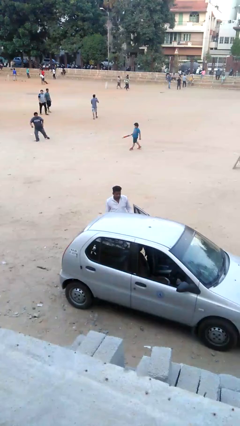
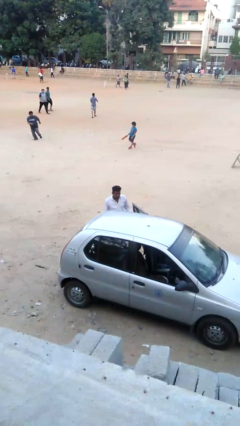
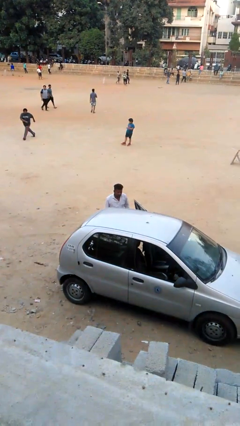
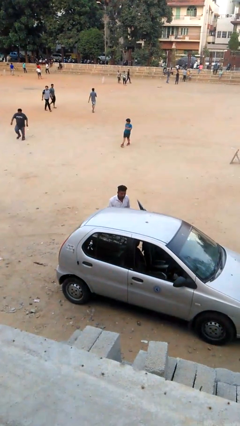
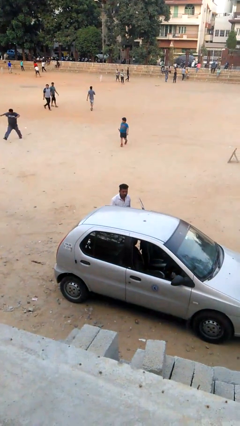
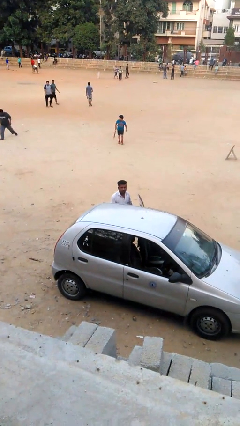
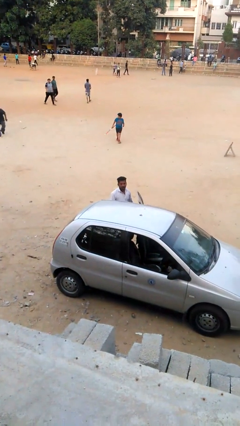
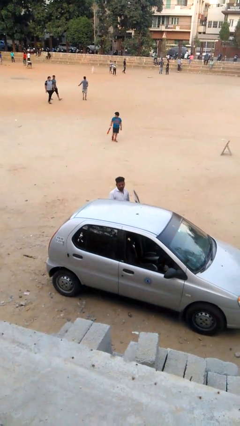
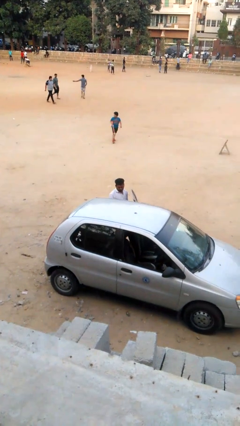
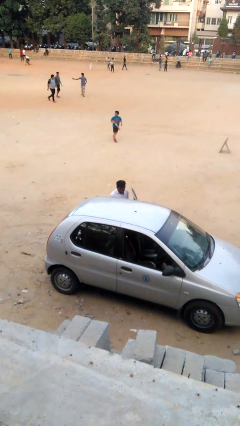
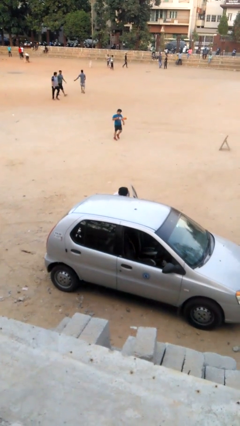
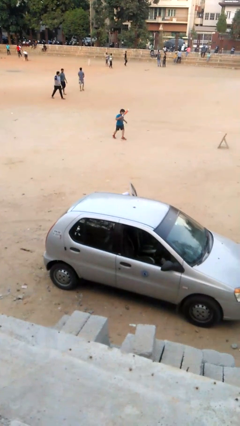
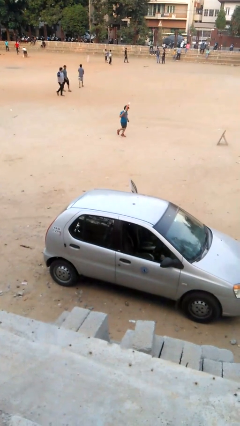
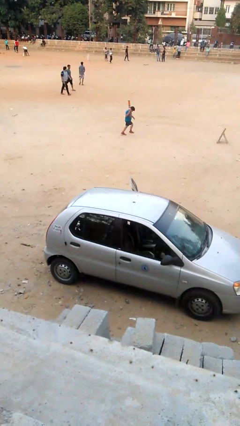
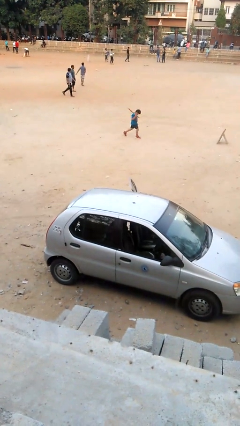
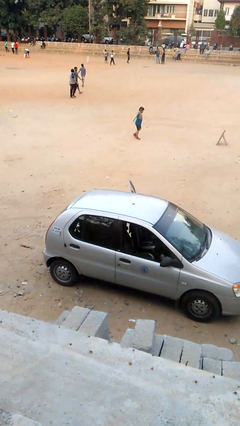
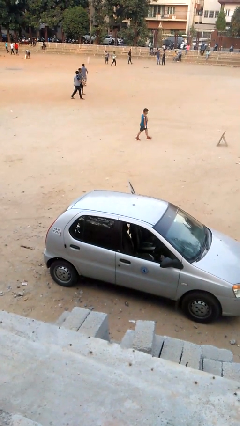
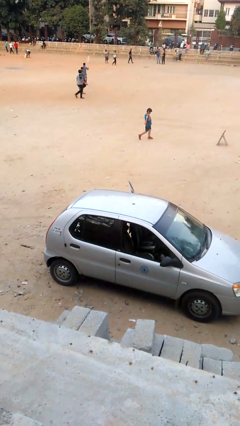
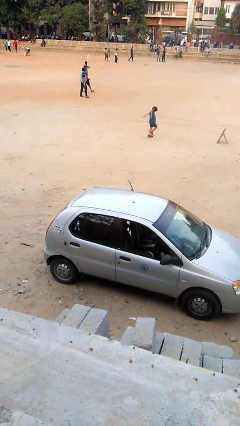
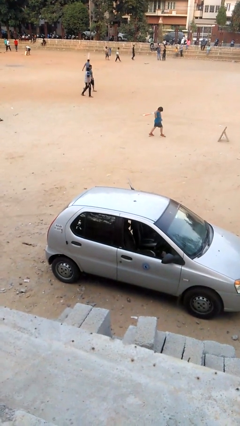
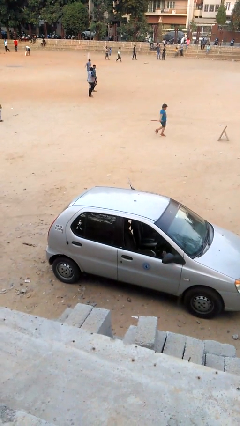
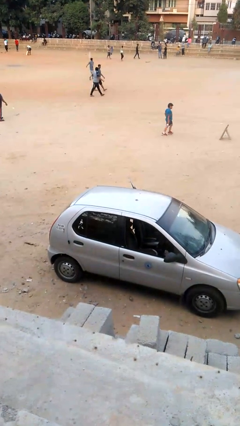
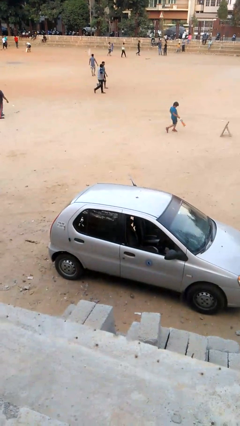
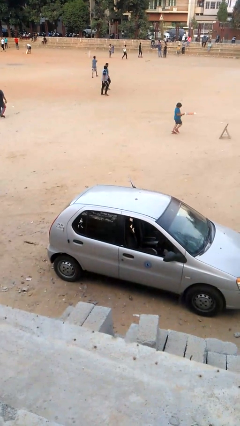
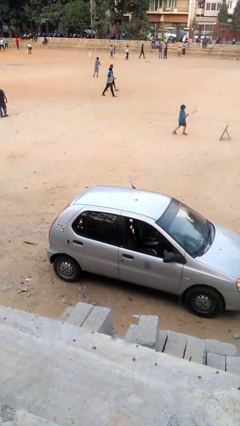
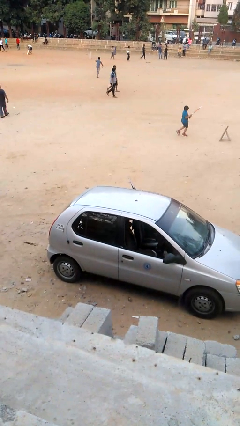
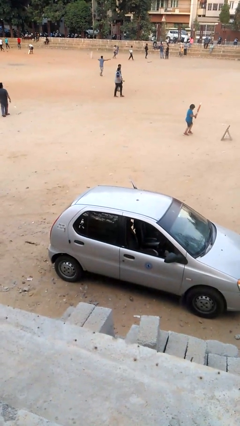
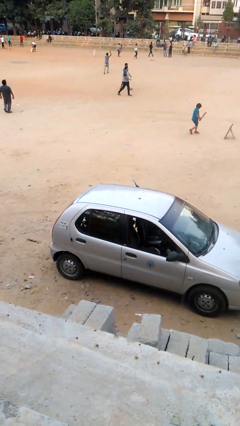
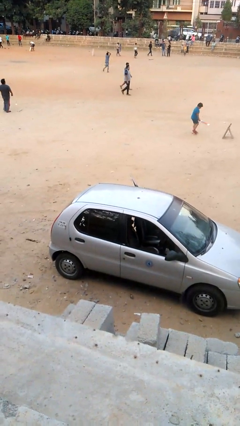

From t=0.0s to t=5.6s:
person enters car

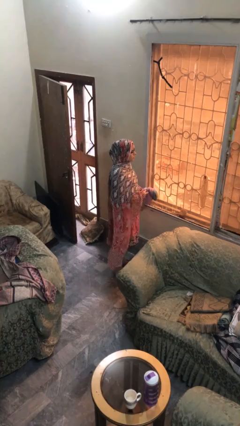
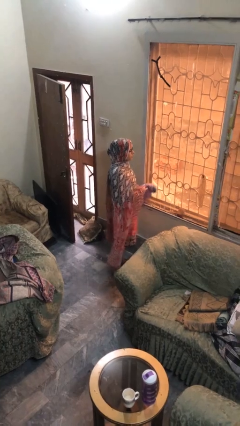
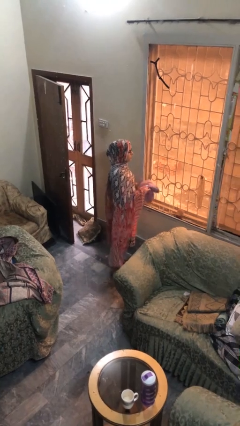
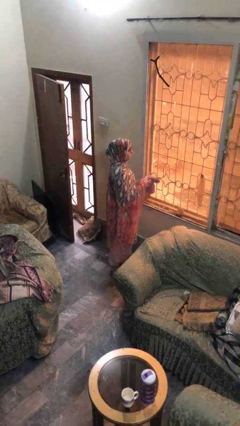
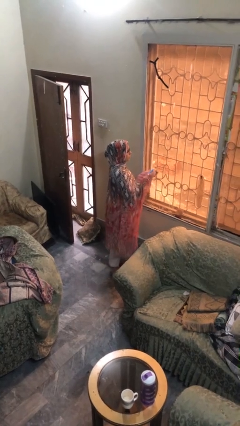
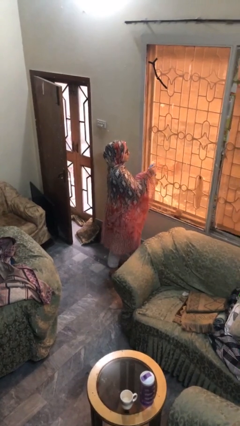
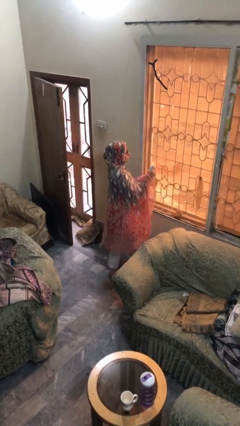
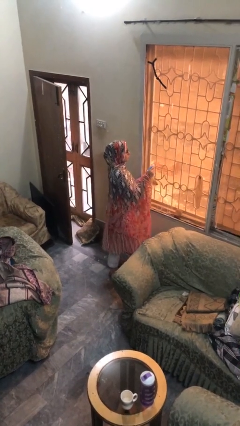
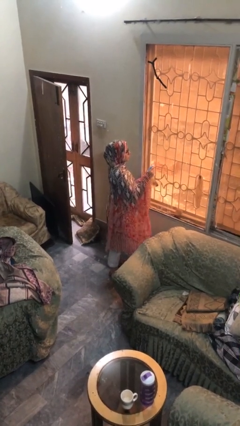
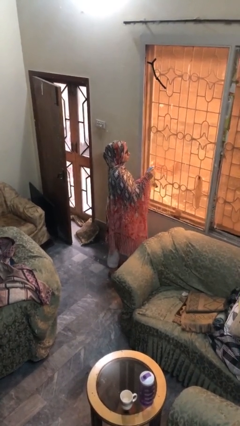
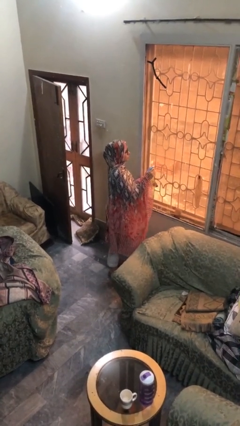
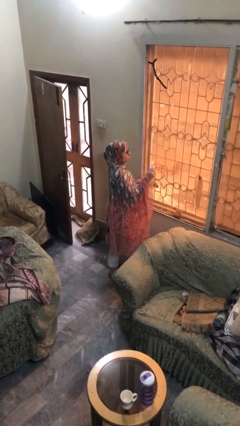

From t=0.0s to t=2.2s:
person sprays from bottle

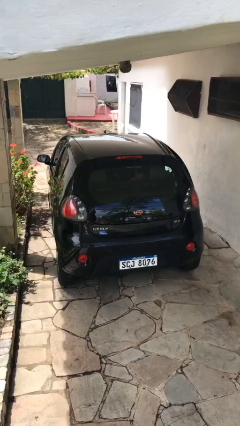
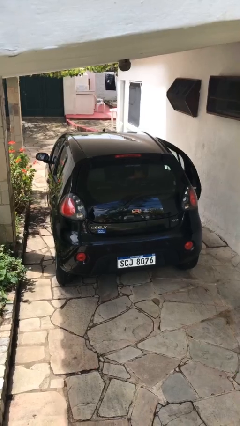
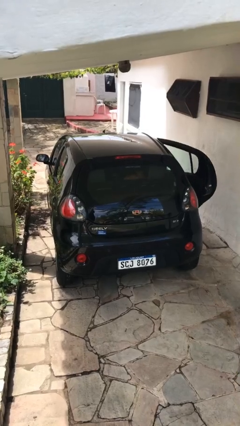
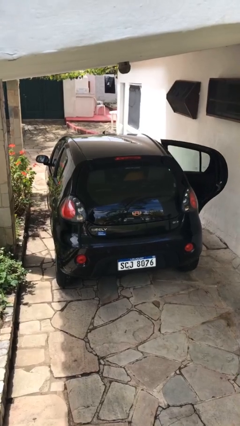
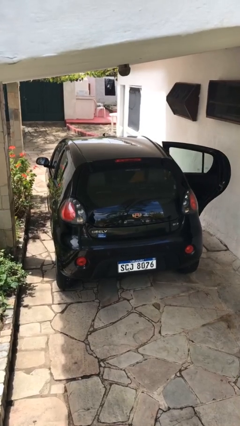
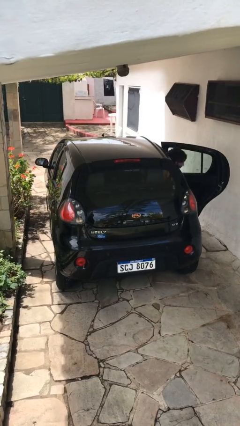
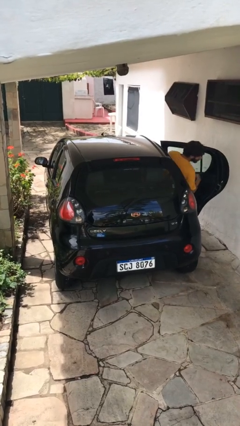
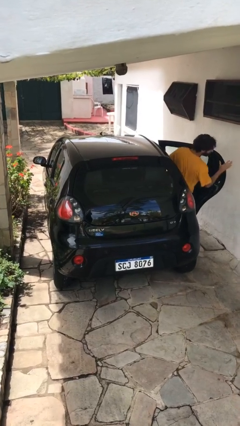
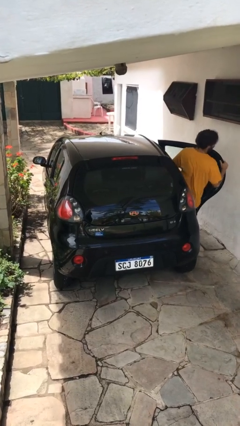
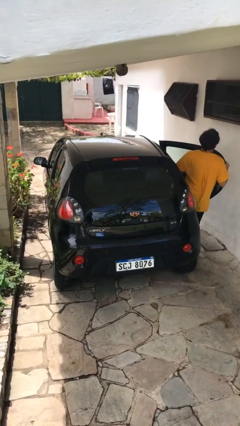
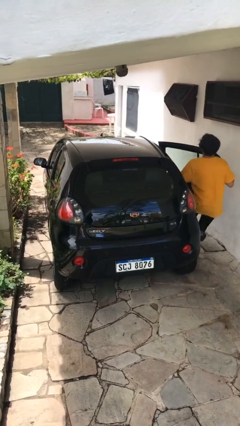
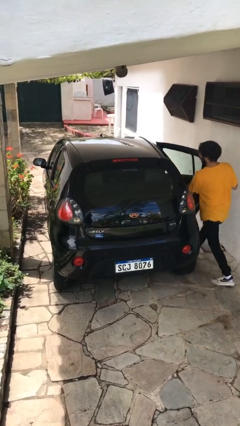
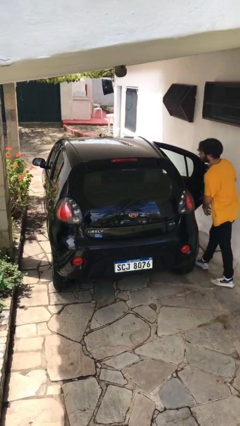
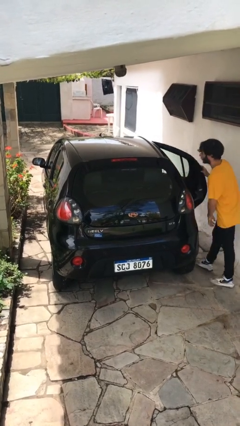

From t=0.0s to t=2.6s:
car drops off person

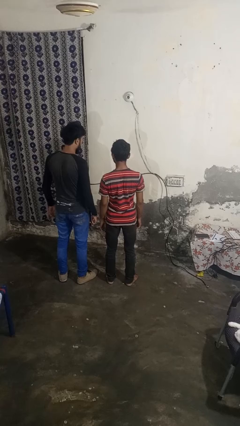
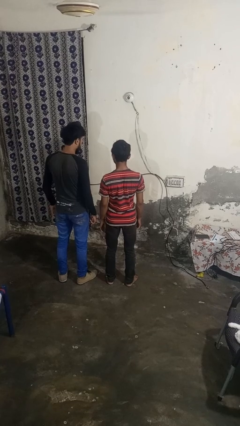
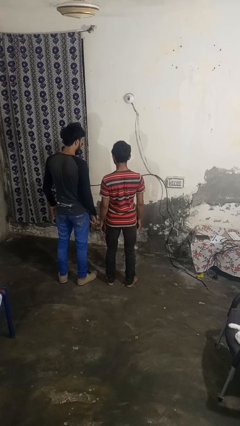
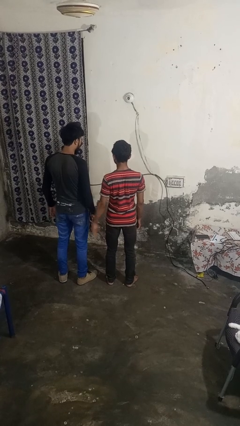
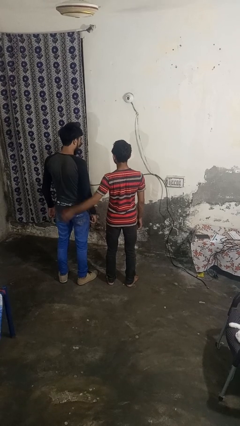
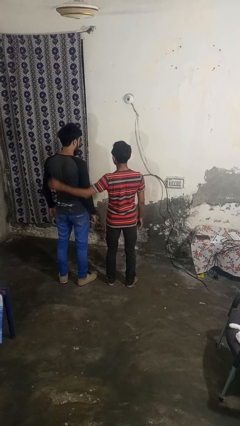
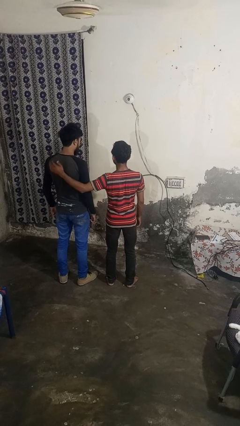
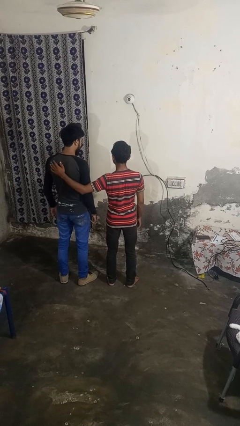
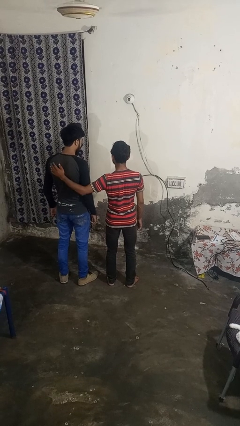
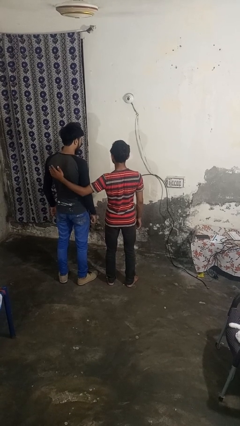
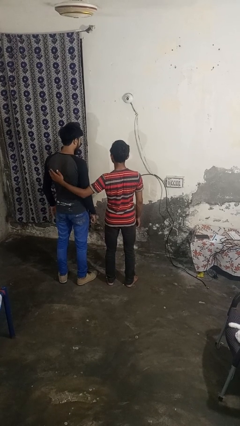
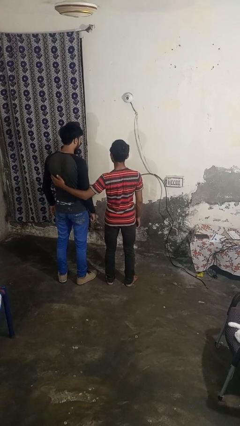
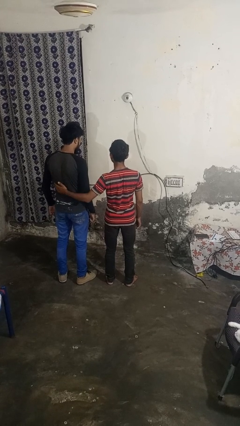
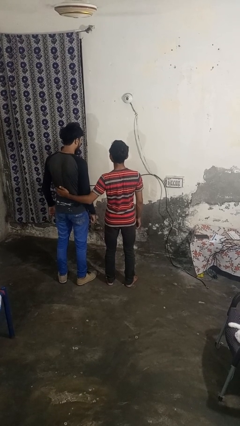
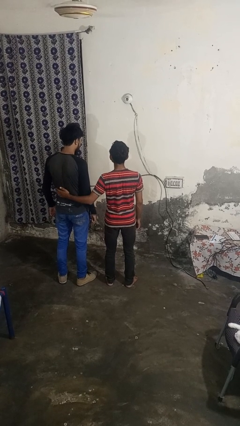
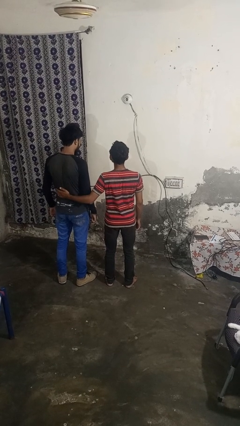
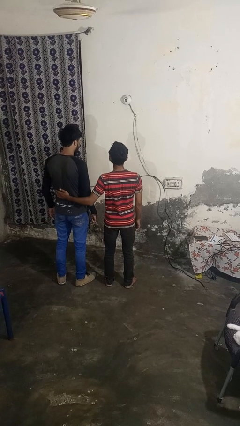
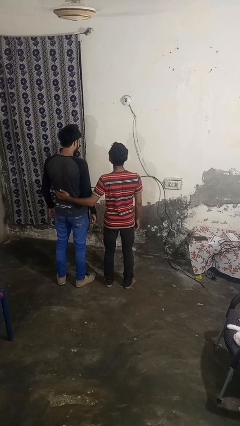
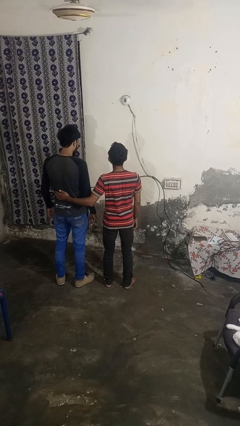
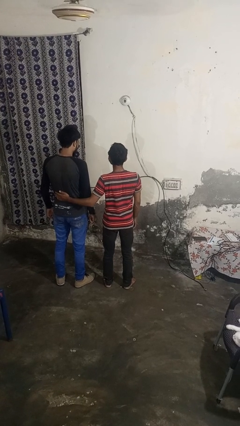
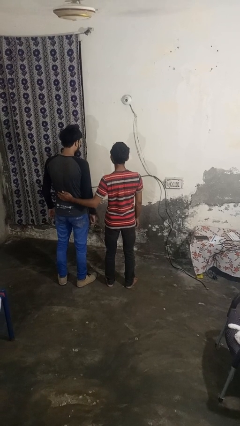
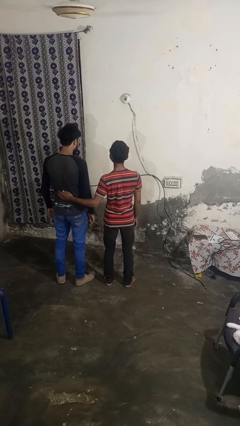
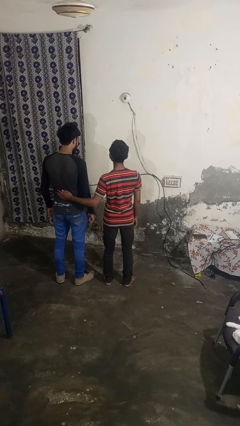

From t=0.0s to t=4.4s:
person touches back of person

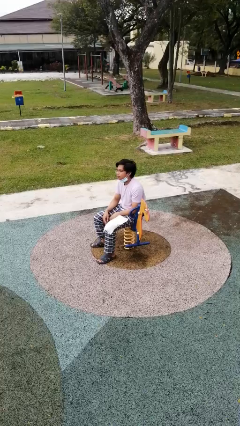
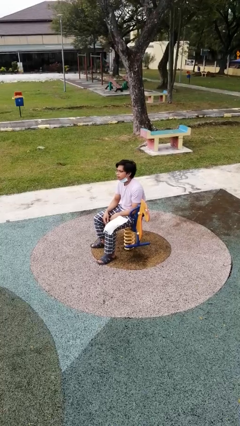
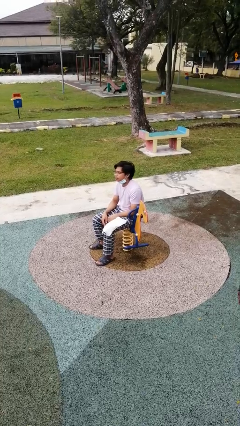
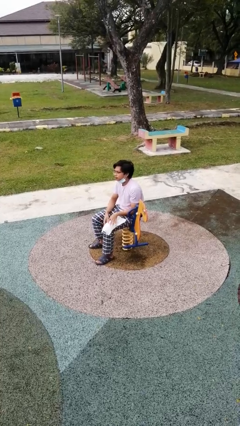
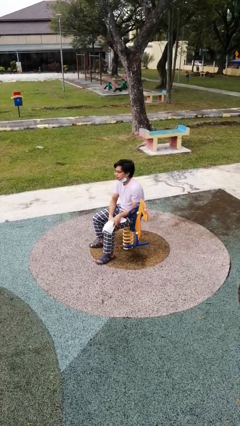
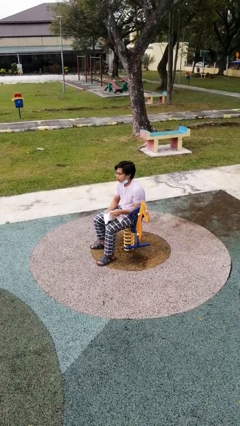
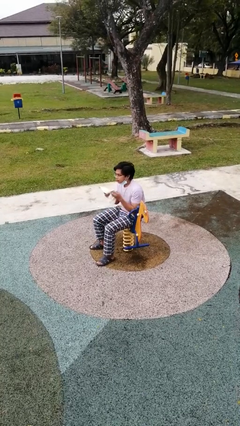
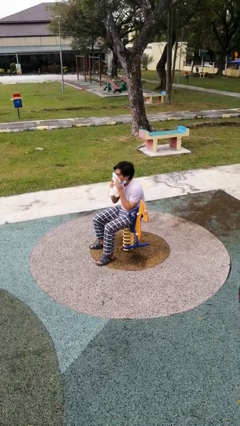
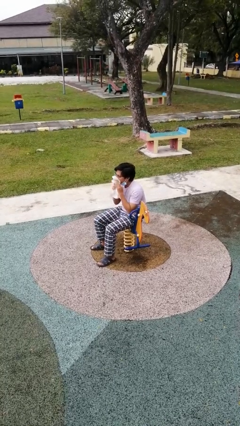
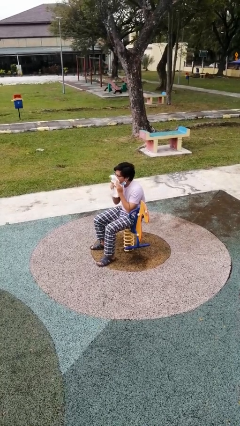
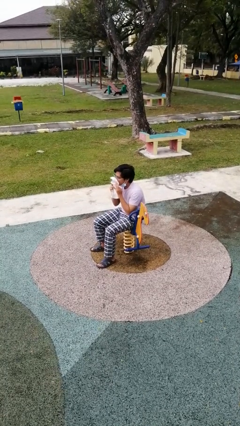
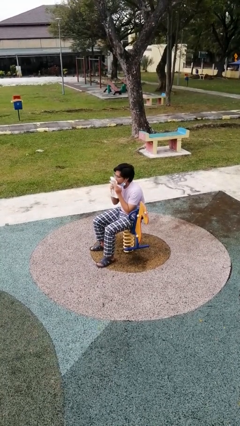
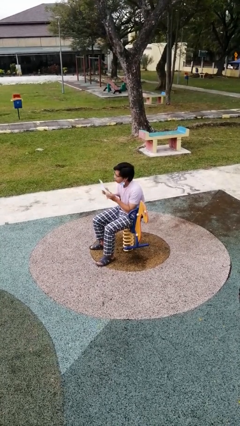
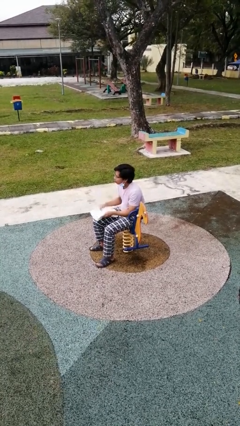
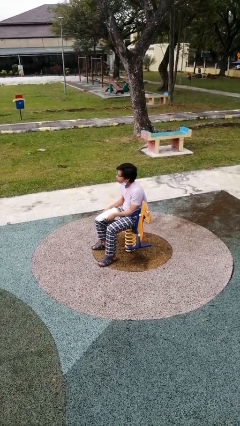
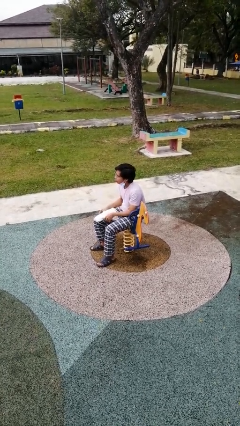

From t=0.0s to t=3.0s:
person wipes mouth with napkin

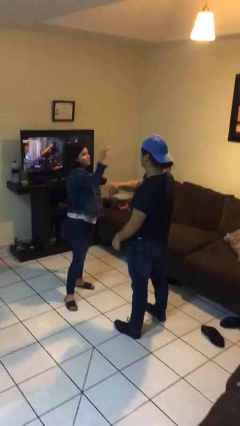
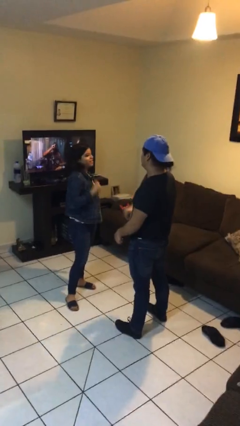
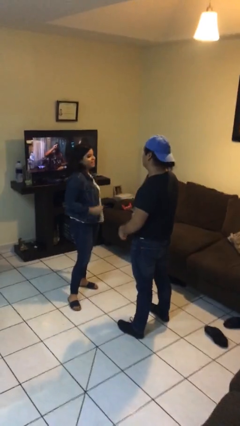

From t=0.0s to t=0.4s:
person highfives hand
